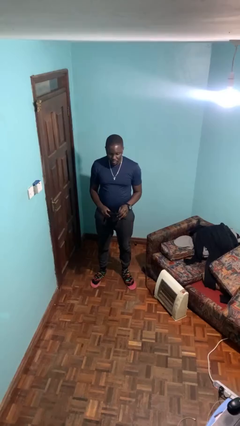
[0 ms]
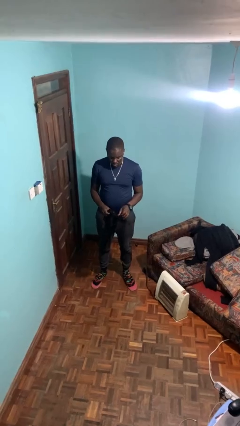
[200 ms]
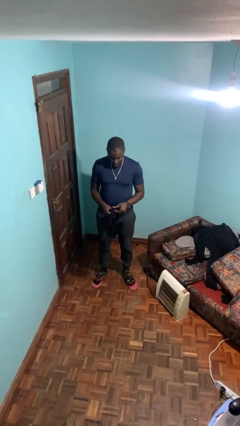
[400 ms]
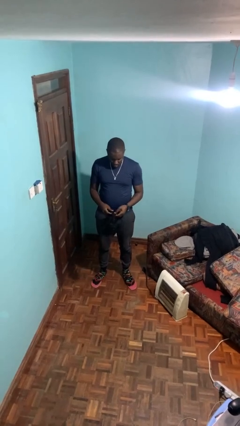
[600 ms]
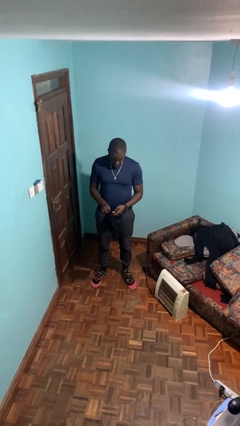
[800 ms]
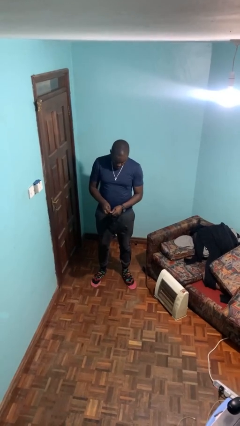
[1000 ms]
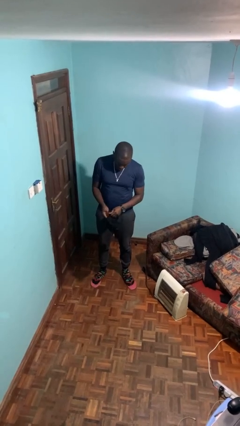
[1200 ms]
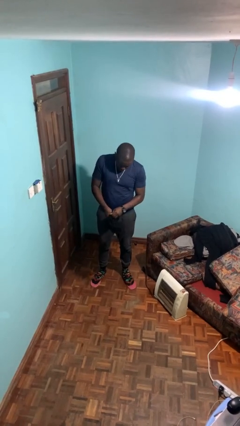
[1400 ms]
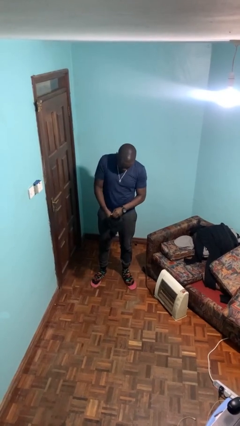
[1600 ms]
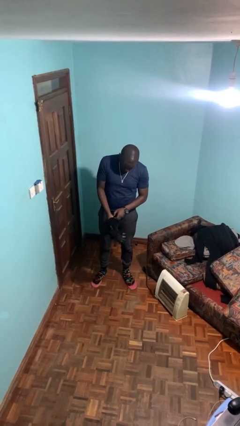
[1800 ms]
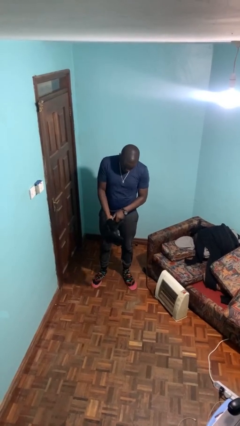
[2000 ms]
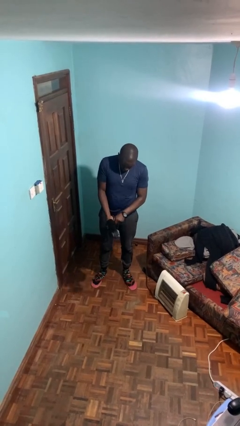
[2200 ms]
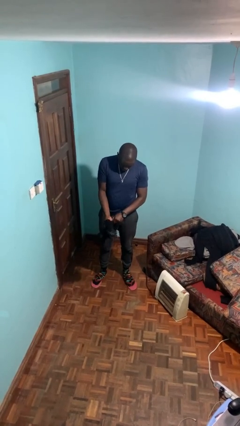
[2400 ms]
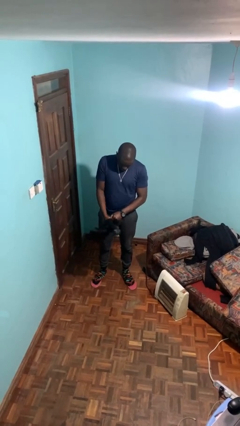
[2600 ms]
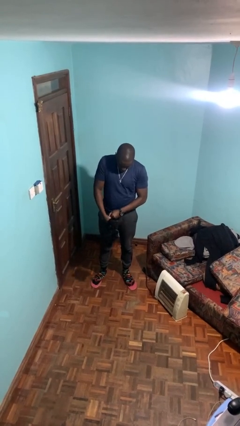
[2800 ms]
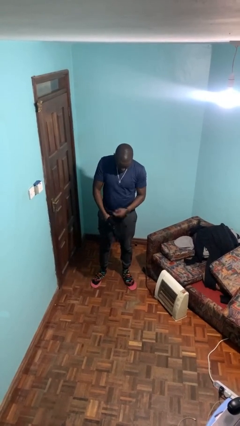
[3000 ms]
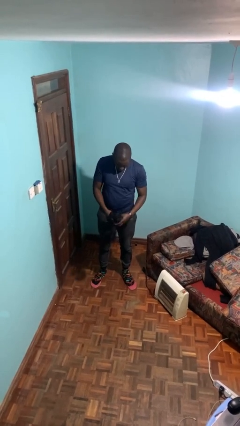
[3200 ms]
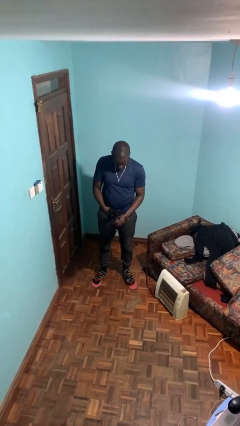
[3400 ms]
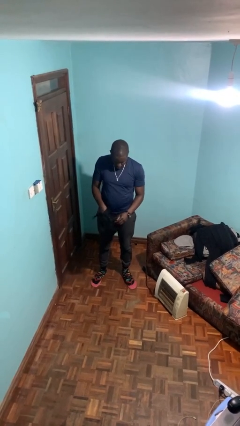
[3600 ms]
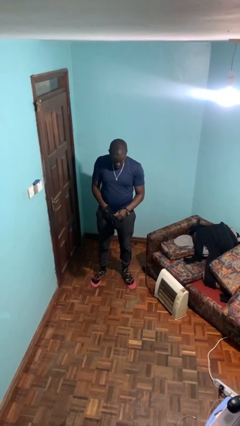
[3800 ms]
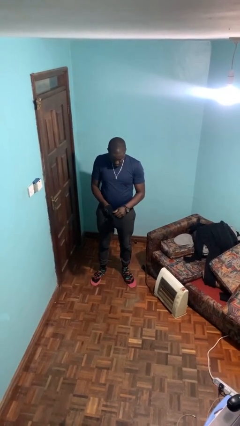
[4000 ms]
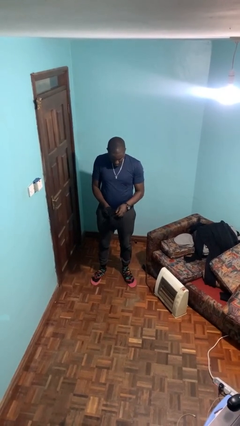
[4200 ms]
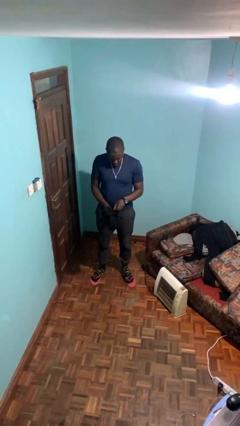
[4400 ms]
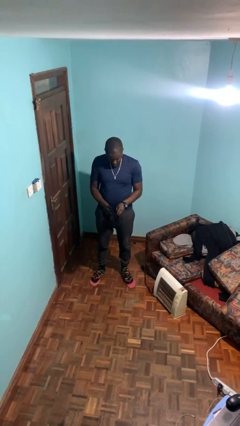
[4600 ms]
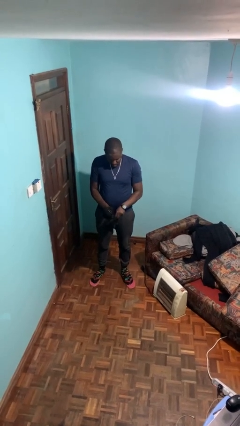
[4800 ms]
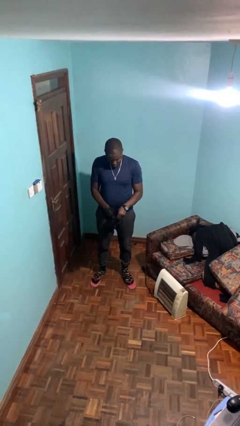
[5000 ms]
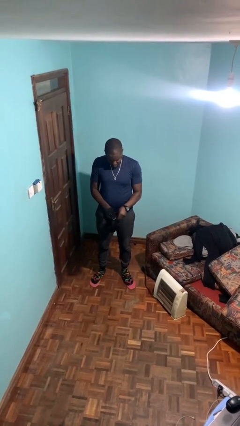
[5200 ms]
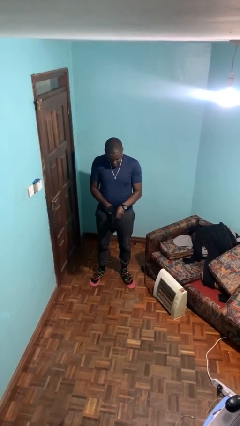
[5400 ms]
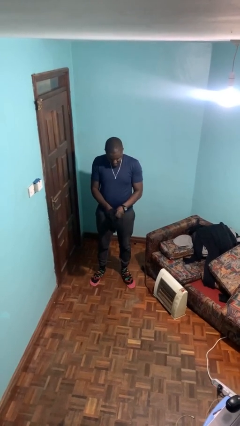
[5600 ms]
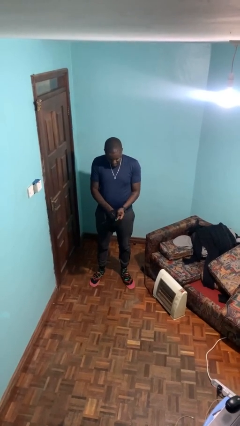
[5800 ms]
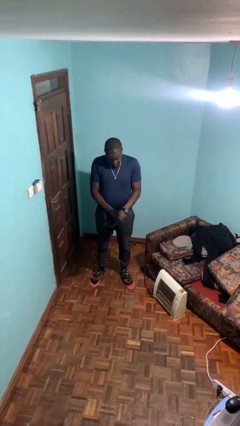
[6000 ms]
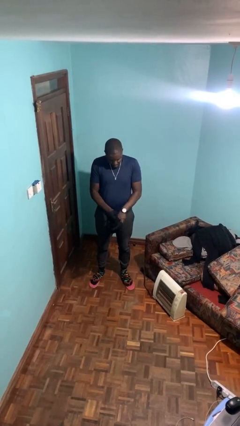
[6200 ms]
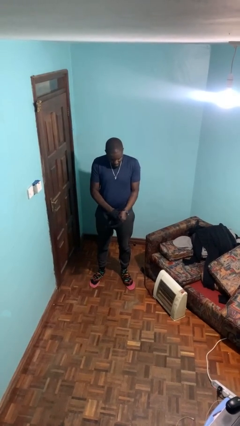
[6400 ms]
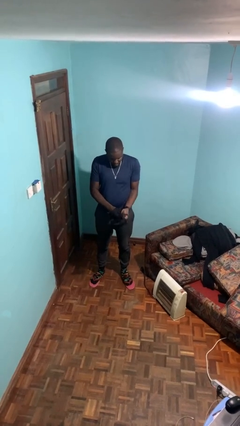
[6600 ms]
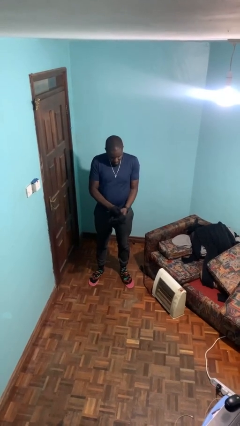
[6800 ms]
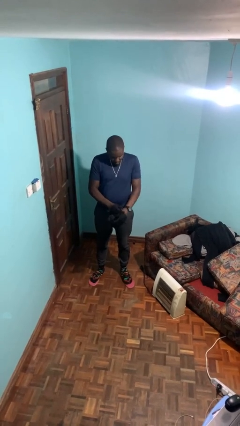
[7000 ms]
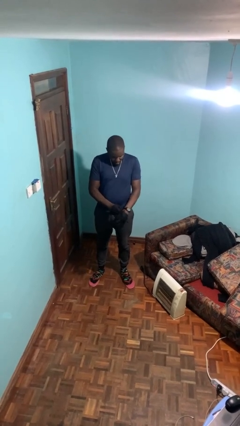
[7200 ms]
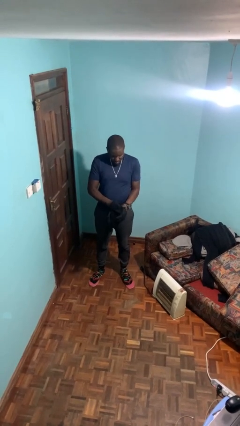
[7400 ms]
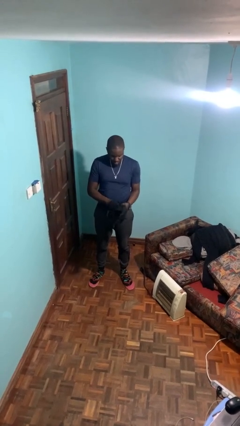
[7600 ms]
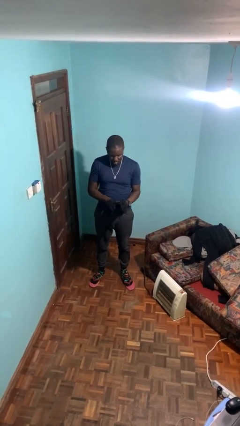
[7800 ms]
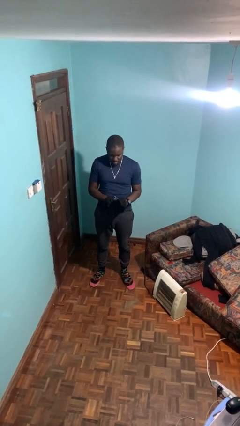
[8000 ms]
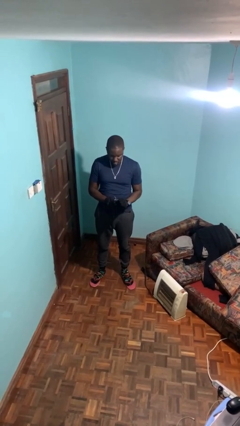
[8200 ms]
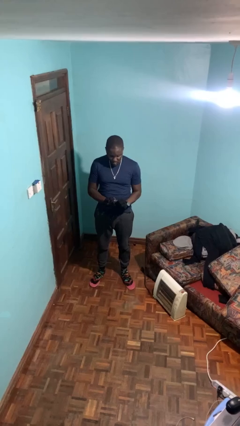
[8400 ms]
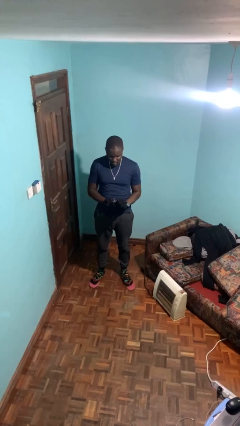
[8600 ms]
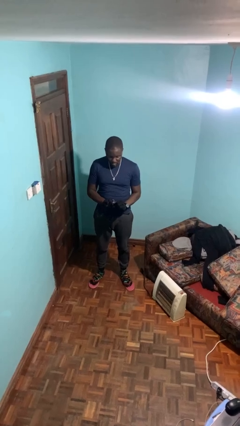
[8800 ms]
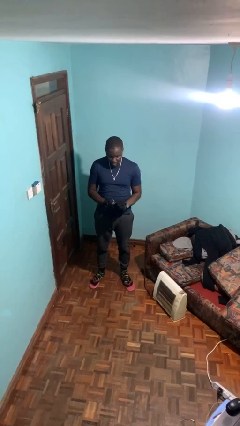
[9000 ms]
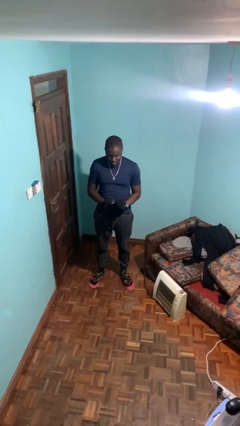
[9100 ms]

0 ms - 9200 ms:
person puts on gloves

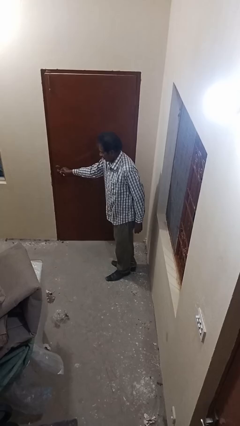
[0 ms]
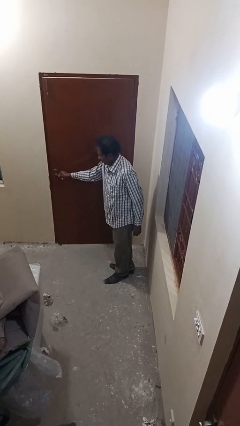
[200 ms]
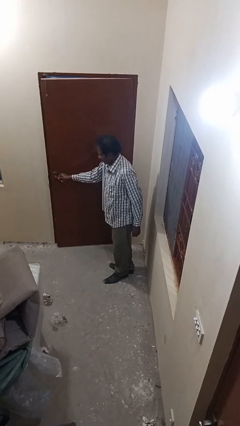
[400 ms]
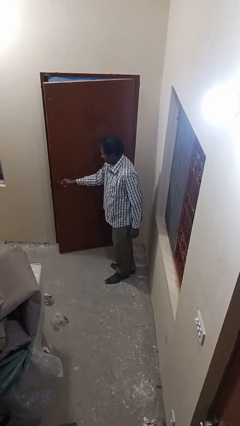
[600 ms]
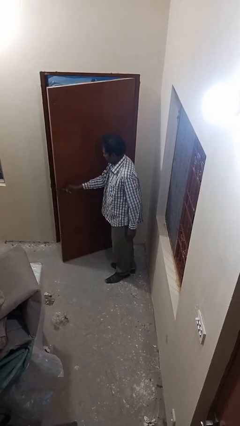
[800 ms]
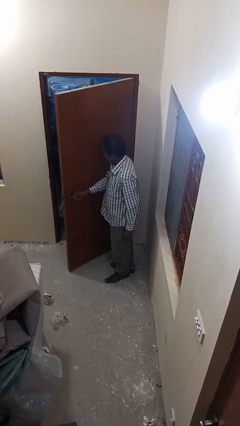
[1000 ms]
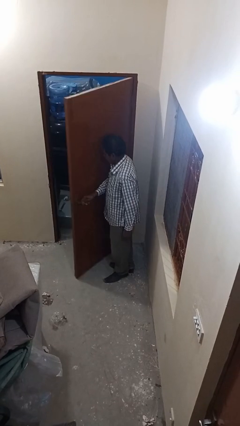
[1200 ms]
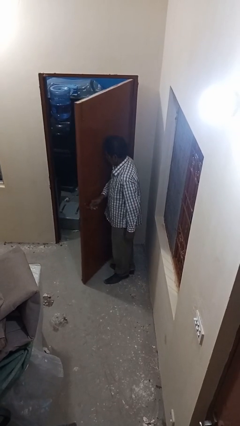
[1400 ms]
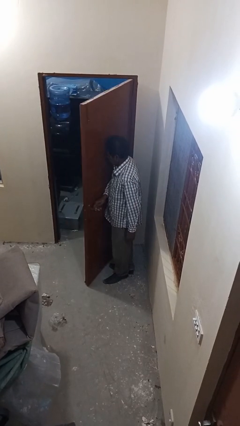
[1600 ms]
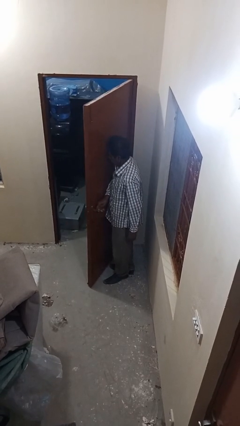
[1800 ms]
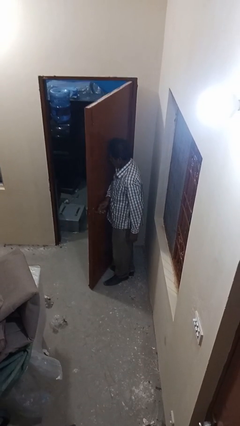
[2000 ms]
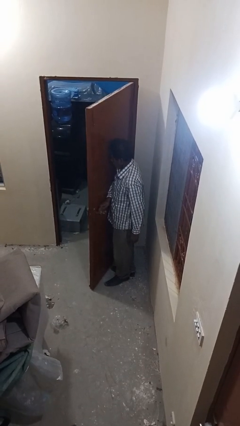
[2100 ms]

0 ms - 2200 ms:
person opens facility door

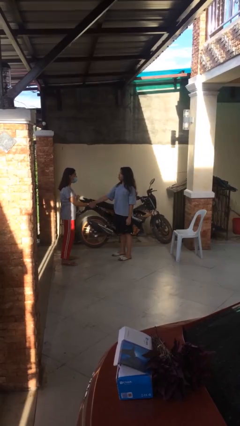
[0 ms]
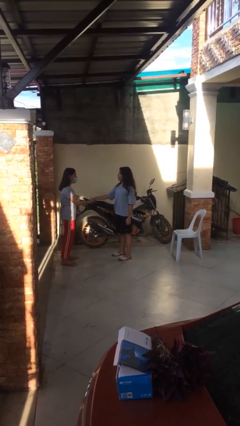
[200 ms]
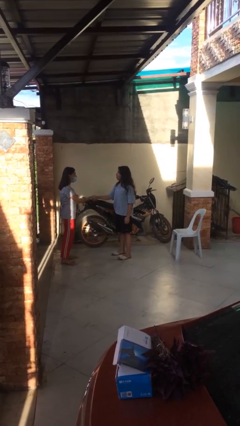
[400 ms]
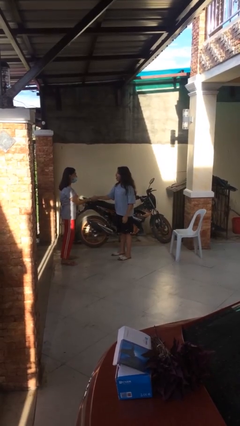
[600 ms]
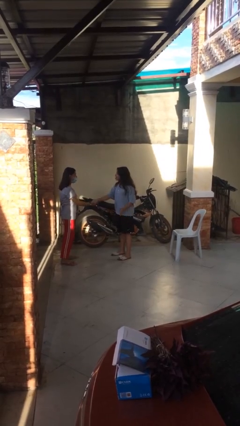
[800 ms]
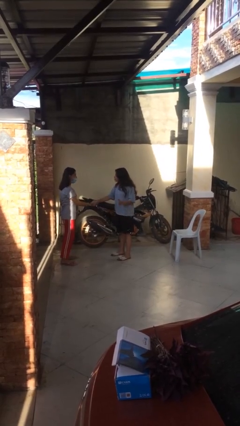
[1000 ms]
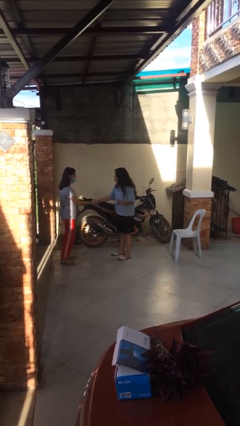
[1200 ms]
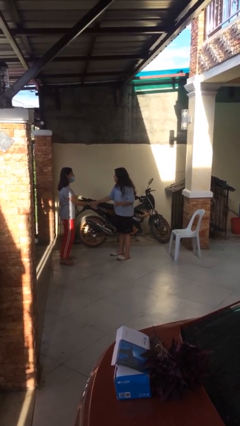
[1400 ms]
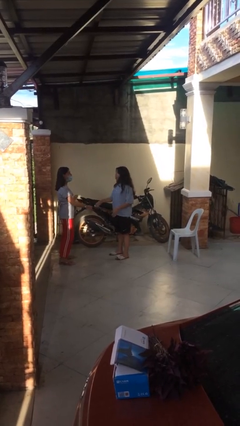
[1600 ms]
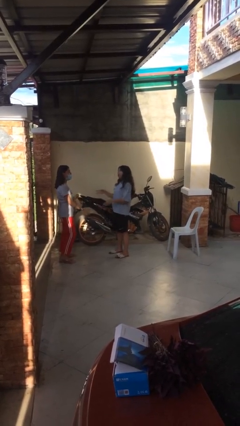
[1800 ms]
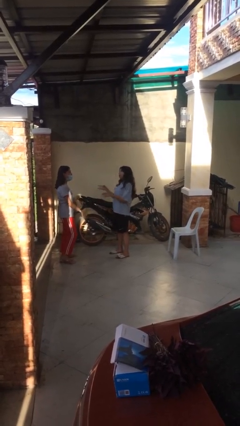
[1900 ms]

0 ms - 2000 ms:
person shakes hand

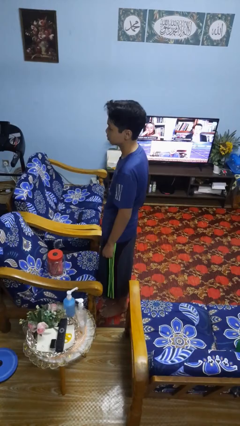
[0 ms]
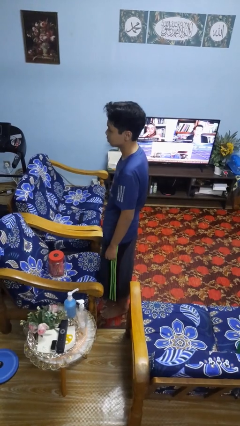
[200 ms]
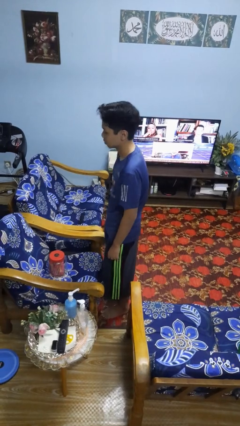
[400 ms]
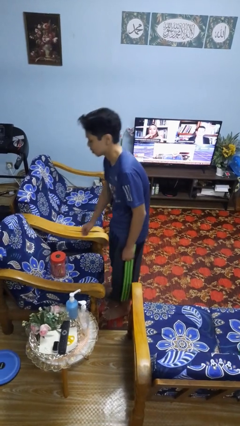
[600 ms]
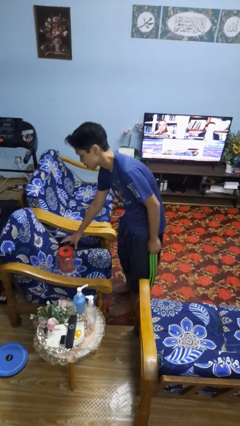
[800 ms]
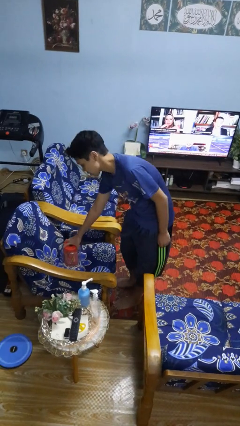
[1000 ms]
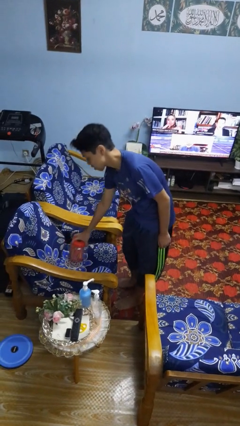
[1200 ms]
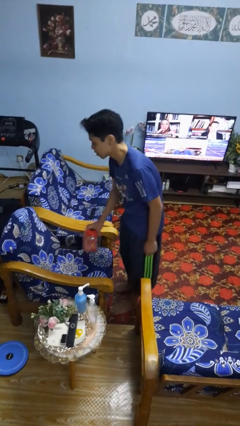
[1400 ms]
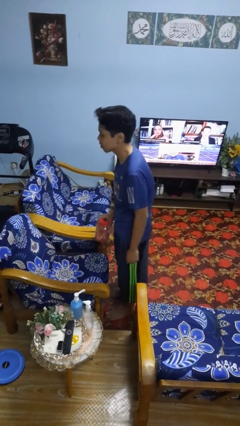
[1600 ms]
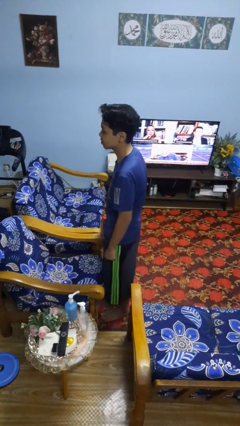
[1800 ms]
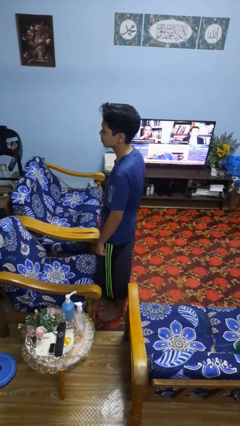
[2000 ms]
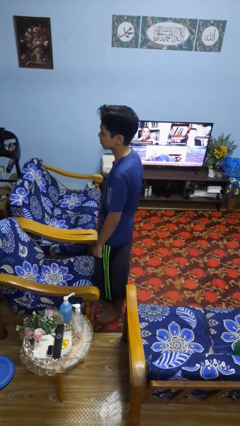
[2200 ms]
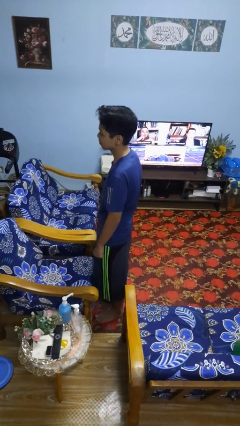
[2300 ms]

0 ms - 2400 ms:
person picks up object from couch

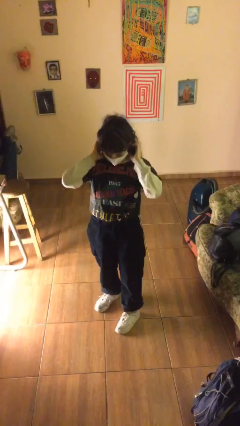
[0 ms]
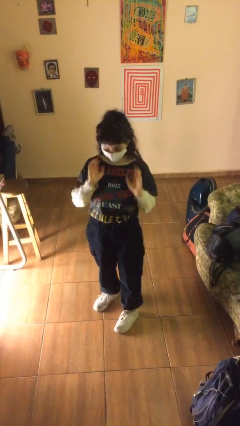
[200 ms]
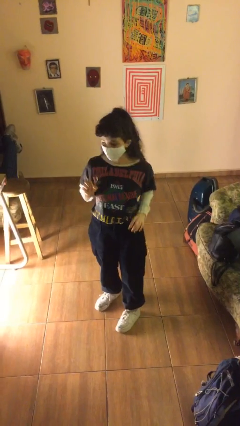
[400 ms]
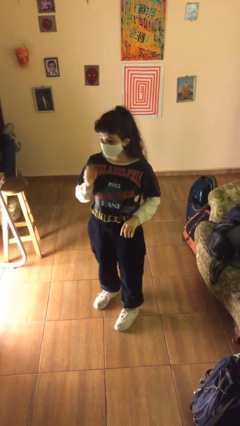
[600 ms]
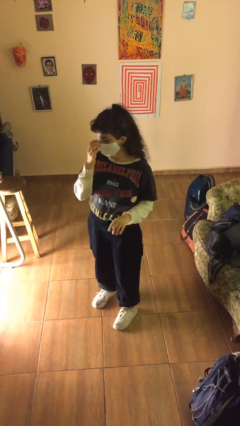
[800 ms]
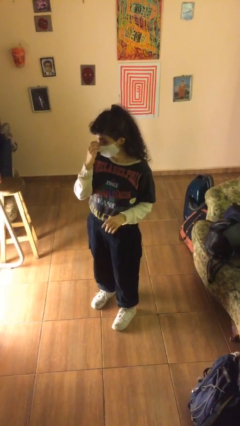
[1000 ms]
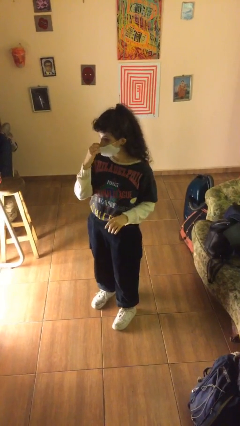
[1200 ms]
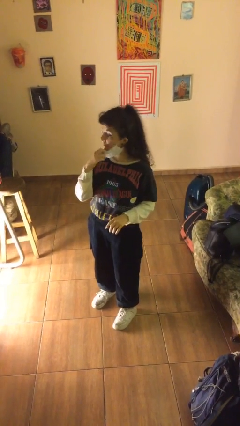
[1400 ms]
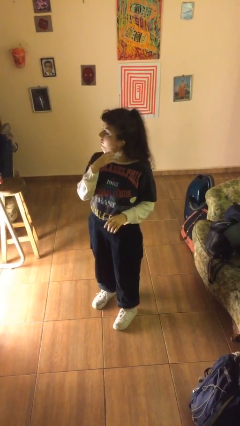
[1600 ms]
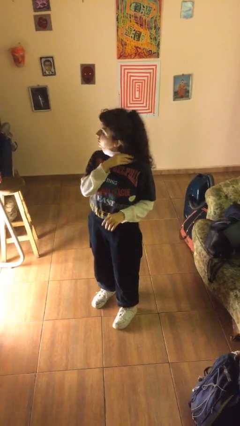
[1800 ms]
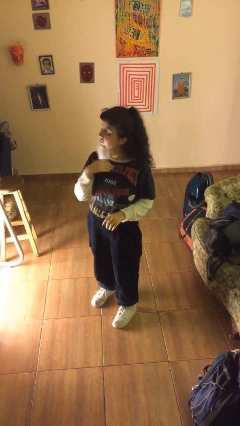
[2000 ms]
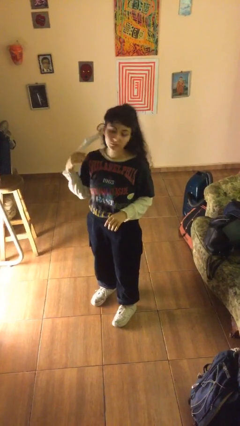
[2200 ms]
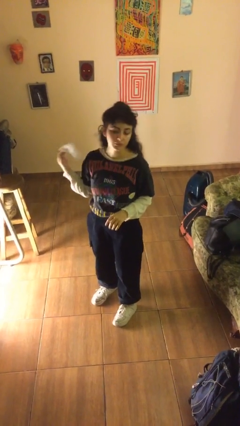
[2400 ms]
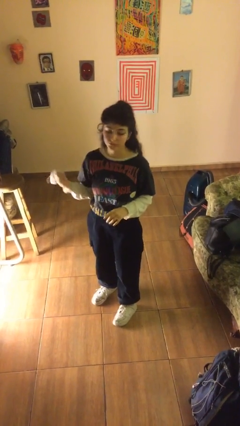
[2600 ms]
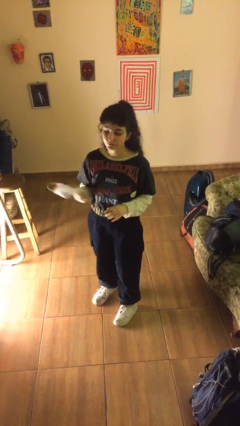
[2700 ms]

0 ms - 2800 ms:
person takes off facemask
